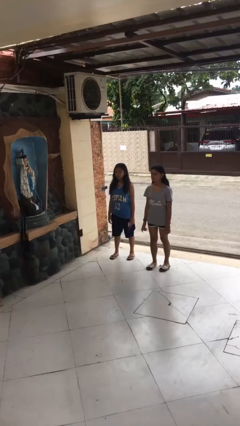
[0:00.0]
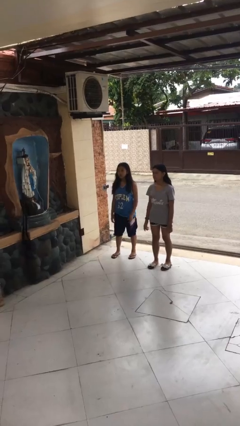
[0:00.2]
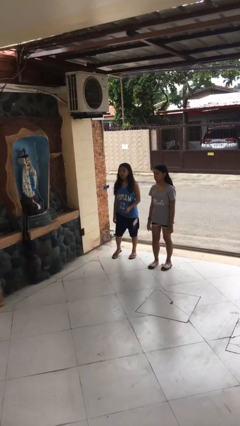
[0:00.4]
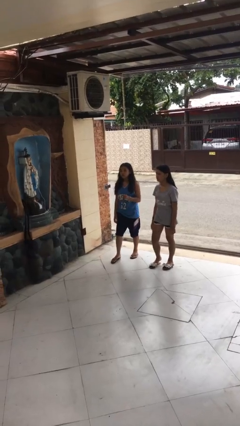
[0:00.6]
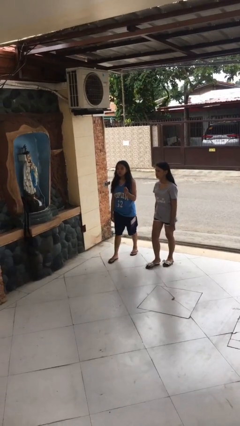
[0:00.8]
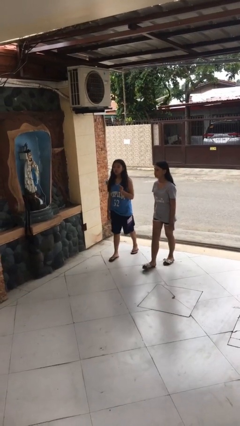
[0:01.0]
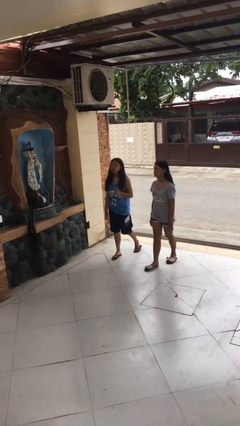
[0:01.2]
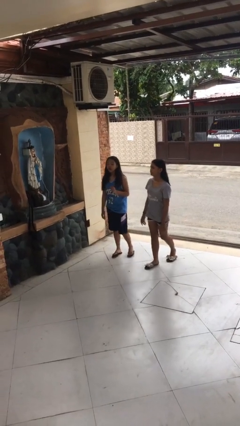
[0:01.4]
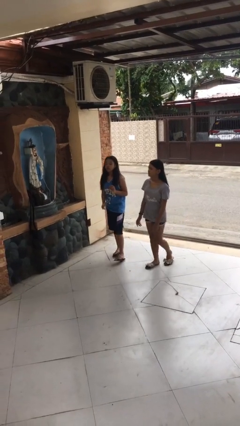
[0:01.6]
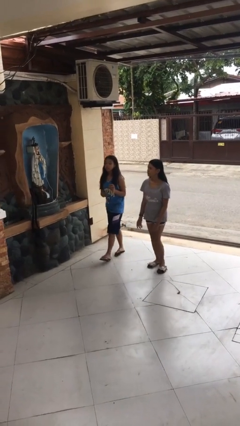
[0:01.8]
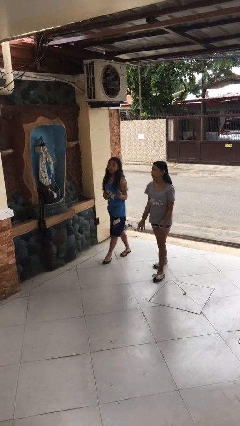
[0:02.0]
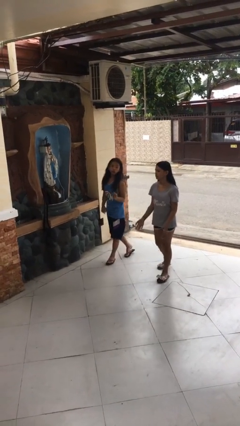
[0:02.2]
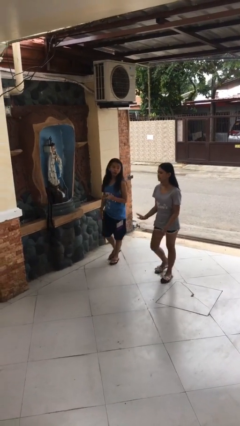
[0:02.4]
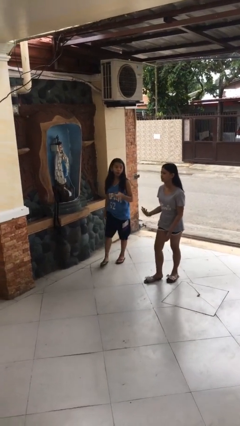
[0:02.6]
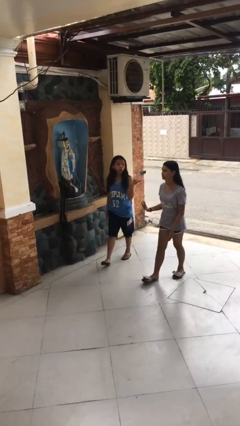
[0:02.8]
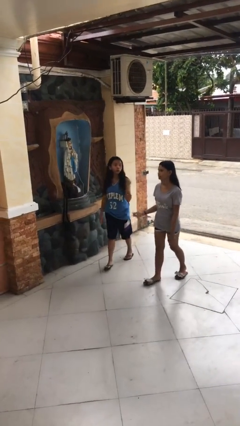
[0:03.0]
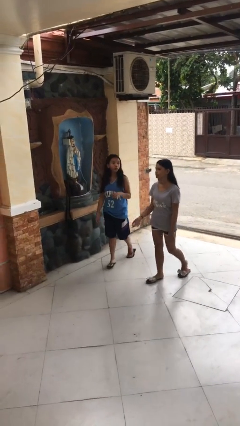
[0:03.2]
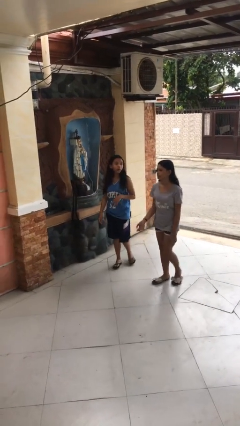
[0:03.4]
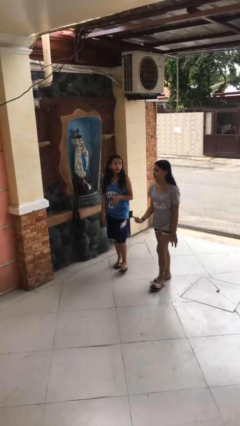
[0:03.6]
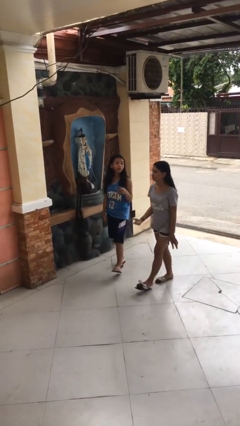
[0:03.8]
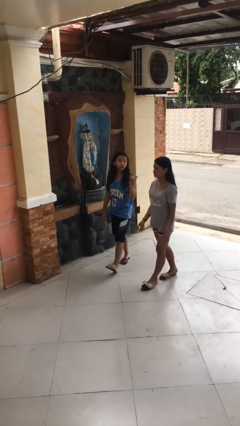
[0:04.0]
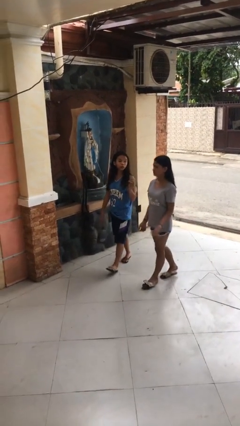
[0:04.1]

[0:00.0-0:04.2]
person talks to person

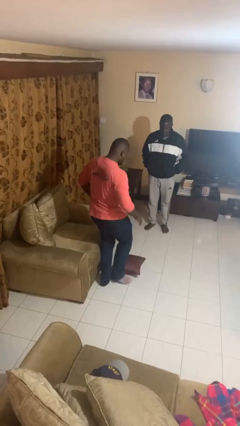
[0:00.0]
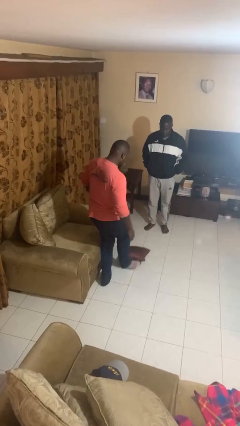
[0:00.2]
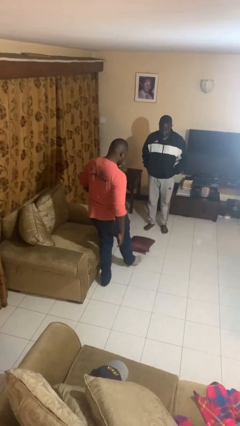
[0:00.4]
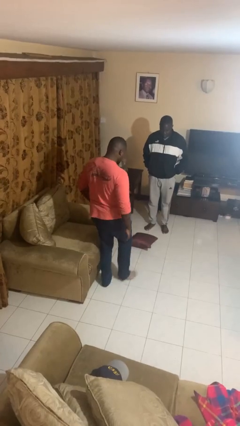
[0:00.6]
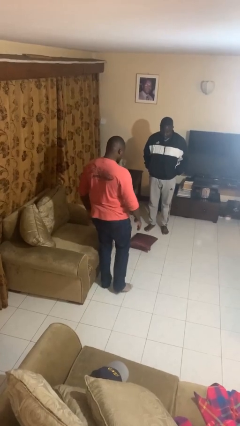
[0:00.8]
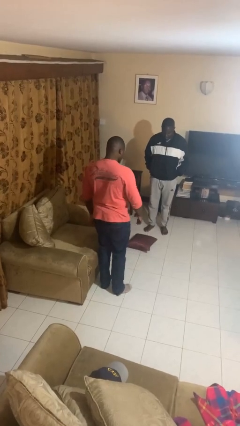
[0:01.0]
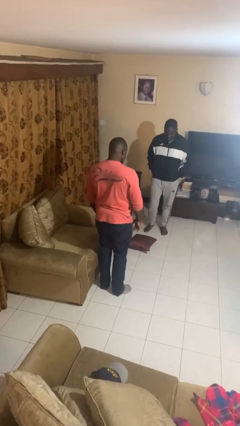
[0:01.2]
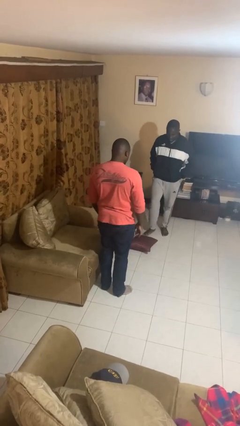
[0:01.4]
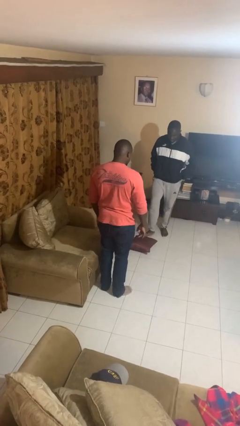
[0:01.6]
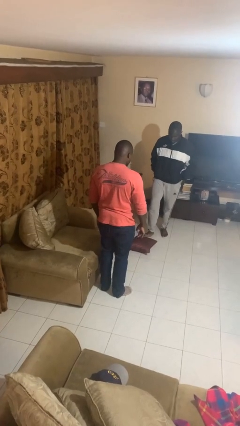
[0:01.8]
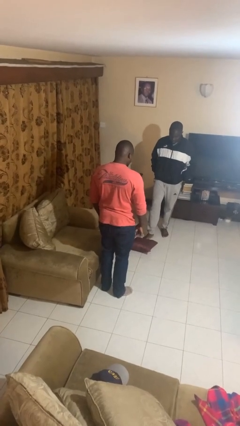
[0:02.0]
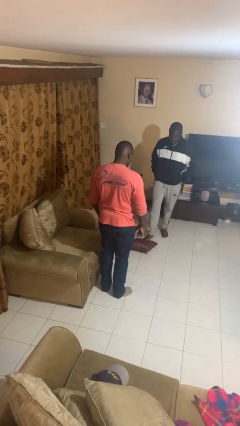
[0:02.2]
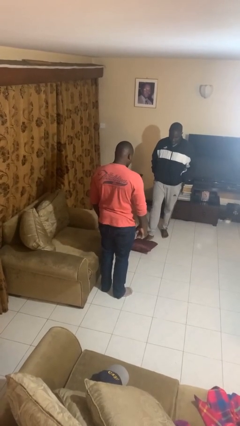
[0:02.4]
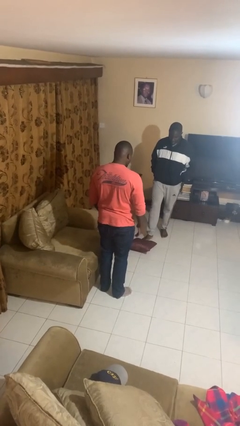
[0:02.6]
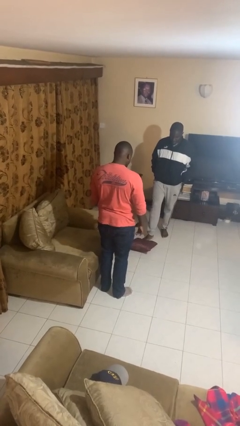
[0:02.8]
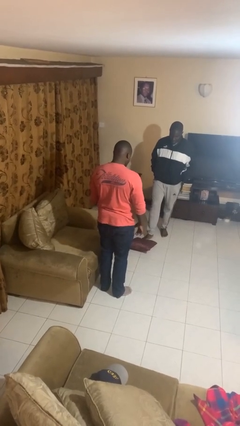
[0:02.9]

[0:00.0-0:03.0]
person kicks object to person

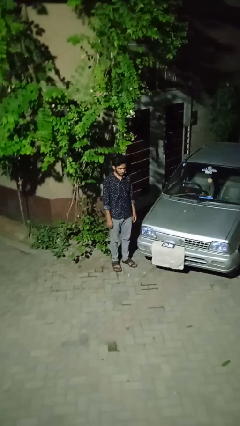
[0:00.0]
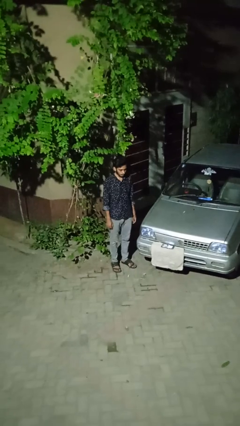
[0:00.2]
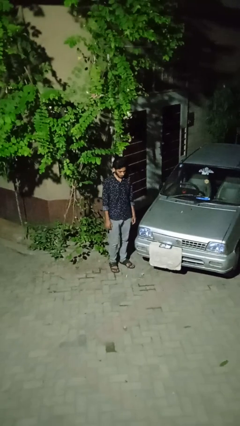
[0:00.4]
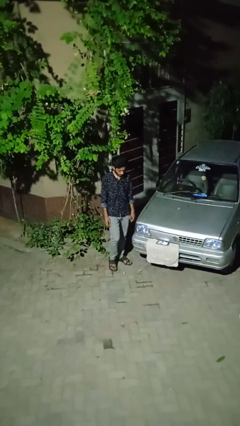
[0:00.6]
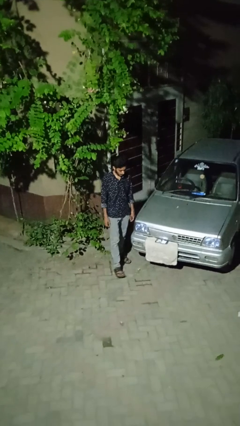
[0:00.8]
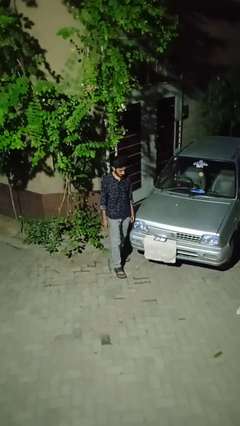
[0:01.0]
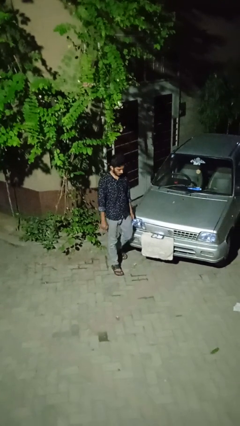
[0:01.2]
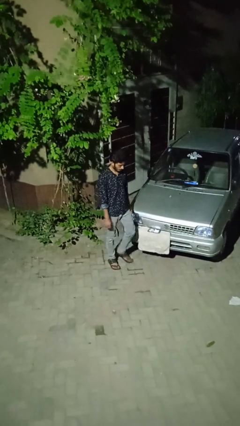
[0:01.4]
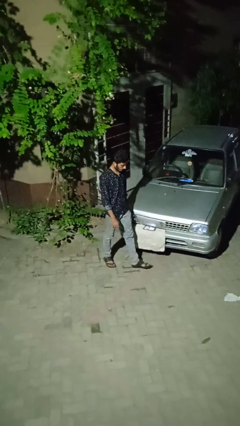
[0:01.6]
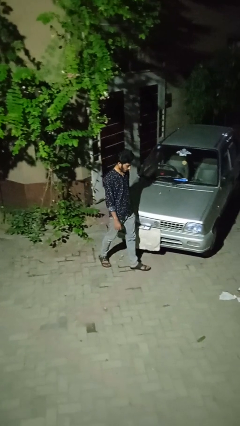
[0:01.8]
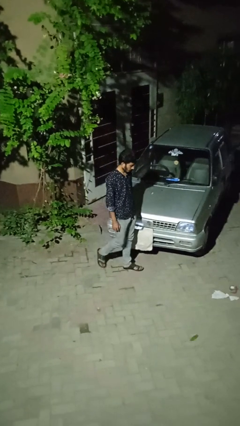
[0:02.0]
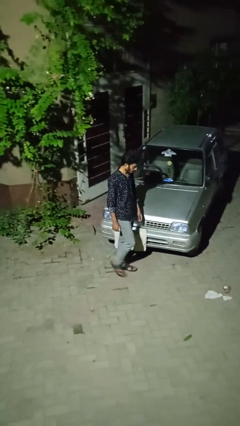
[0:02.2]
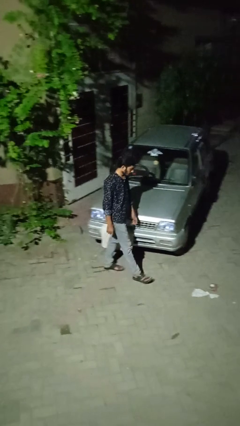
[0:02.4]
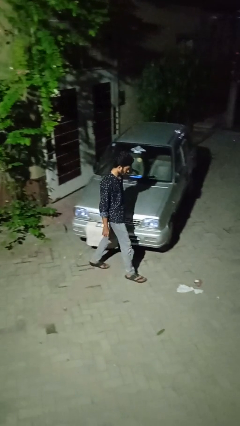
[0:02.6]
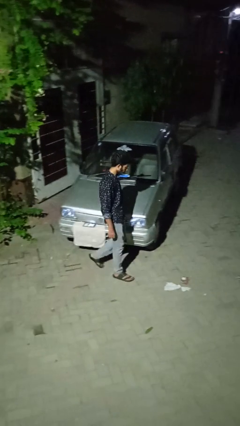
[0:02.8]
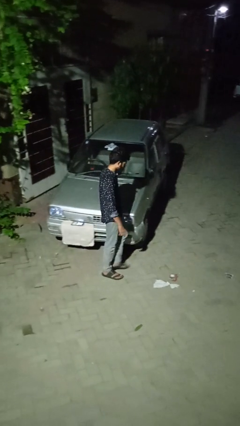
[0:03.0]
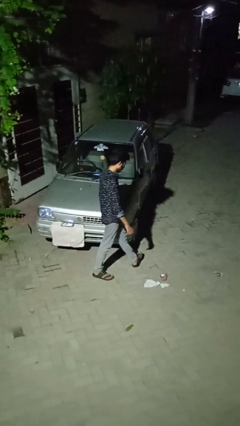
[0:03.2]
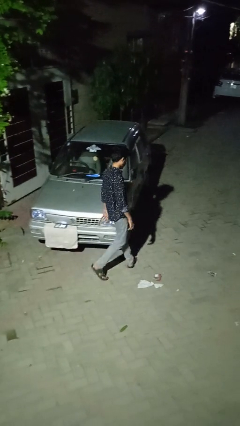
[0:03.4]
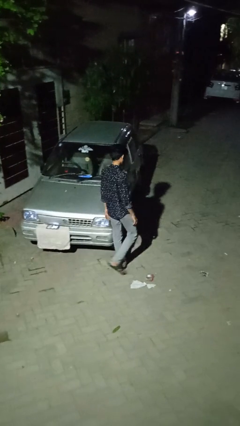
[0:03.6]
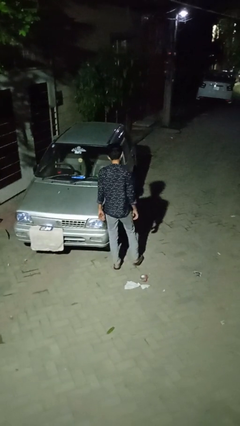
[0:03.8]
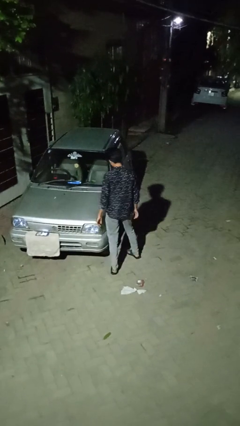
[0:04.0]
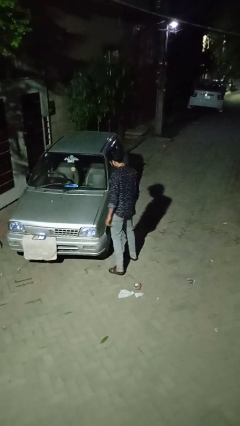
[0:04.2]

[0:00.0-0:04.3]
person walks around car

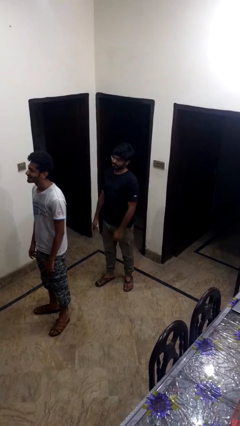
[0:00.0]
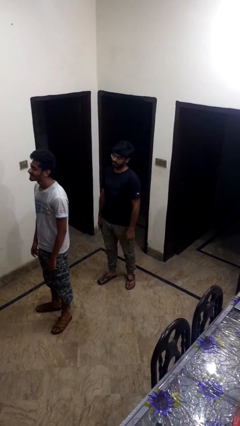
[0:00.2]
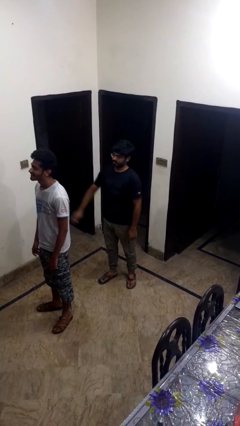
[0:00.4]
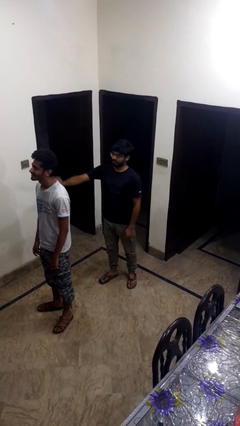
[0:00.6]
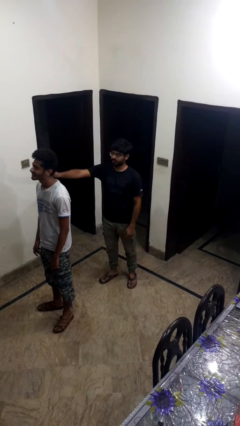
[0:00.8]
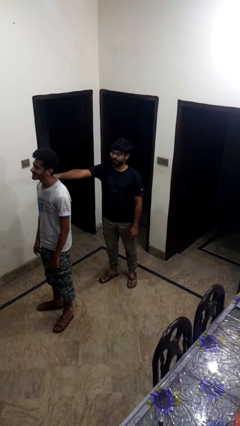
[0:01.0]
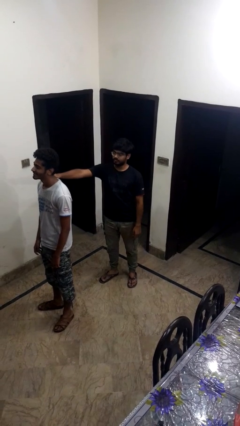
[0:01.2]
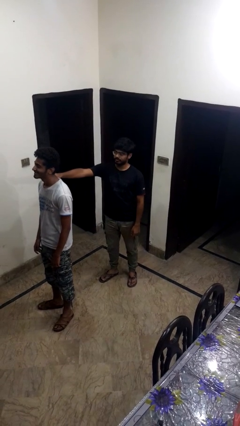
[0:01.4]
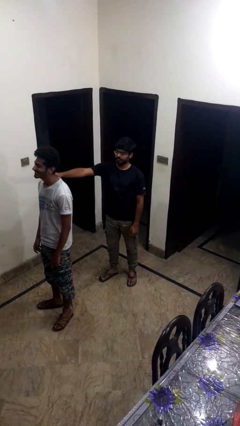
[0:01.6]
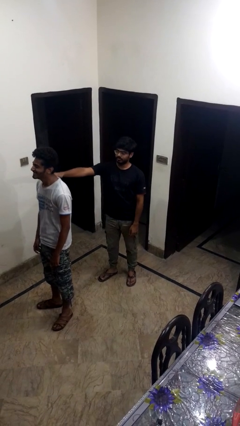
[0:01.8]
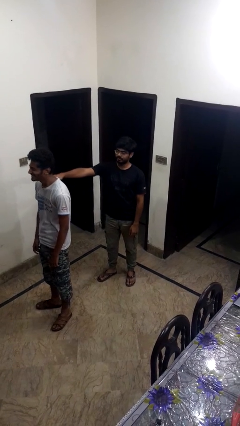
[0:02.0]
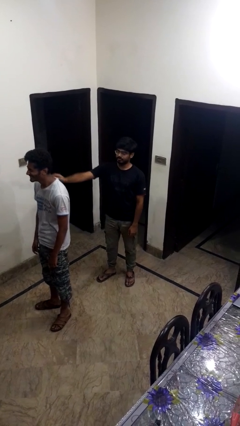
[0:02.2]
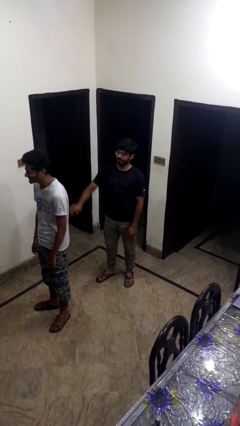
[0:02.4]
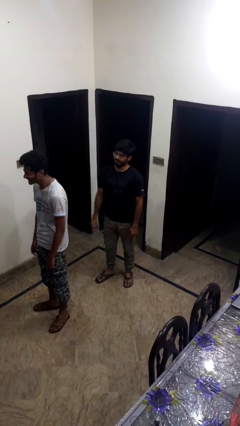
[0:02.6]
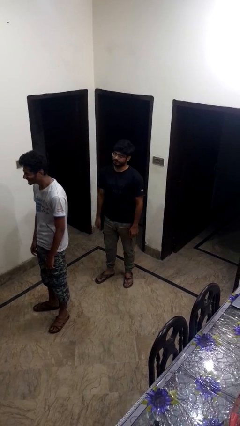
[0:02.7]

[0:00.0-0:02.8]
person touches back of person

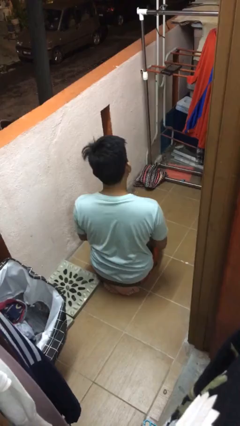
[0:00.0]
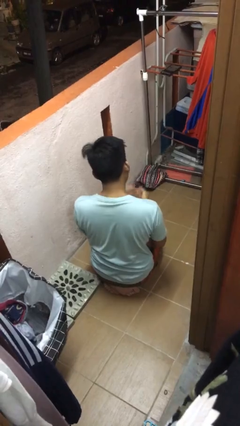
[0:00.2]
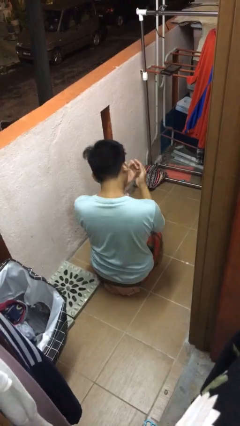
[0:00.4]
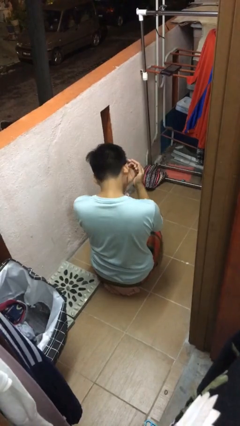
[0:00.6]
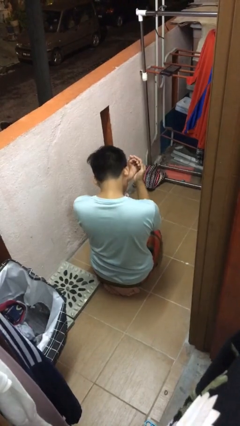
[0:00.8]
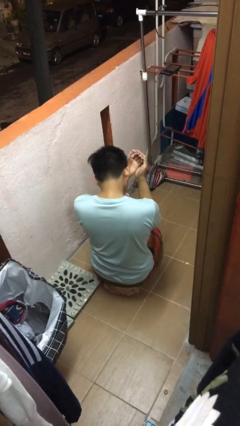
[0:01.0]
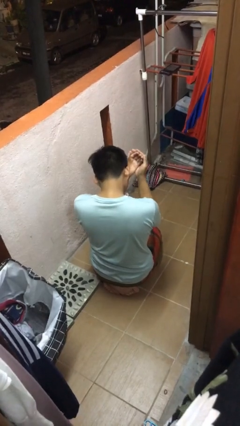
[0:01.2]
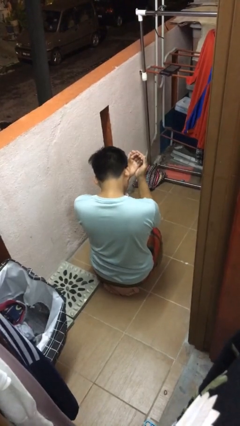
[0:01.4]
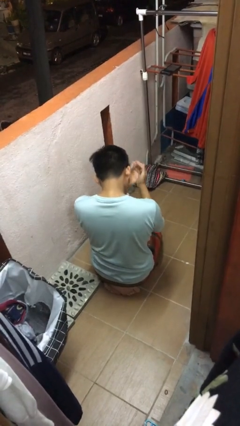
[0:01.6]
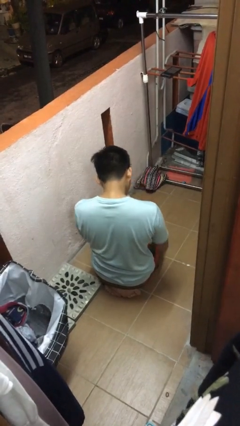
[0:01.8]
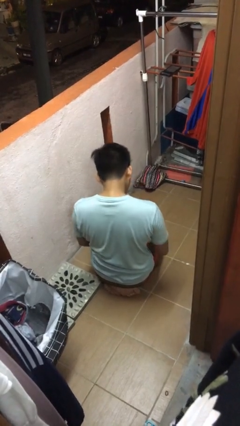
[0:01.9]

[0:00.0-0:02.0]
person prays

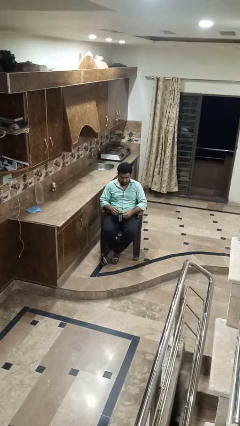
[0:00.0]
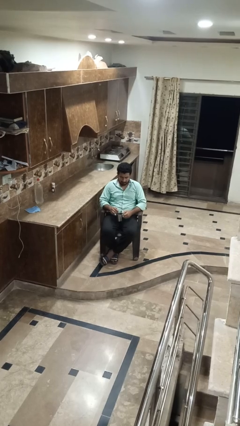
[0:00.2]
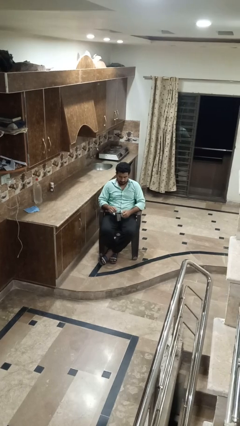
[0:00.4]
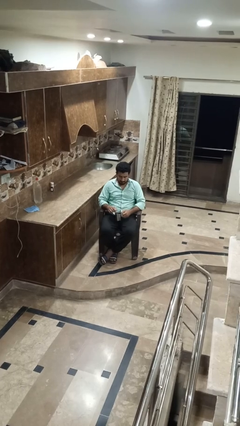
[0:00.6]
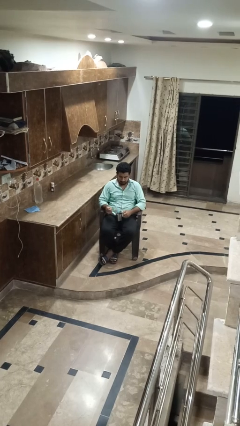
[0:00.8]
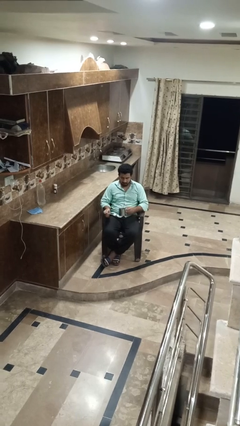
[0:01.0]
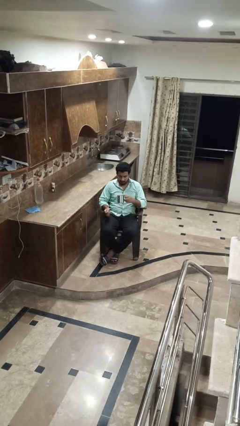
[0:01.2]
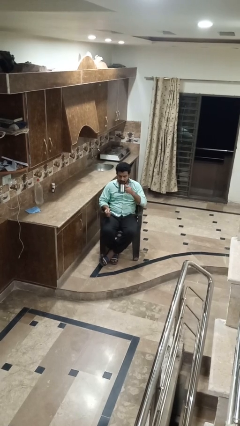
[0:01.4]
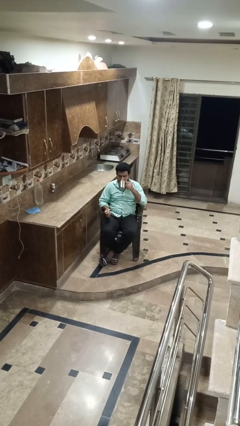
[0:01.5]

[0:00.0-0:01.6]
person stirs mug
